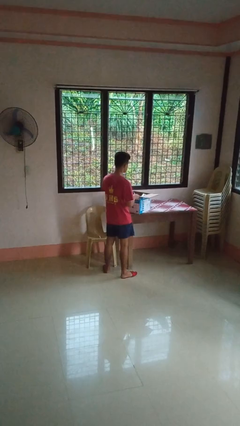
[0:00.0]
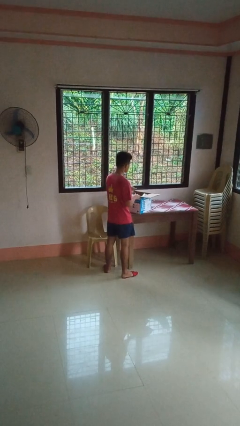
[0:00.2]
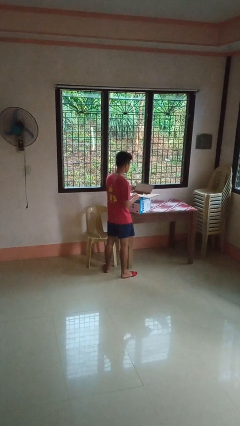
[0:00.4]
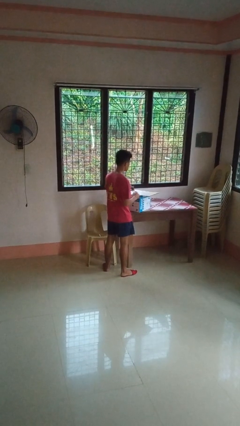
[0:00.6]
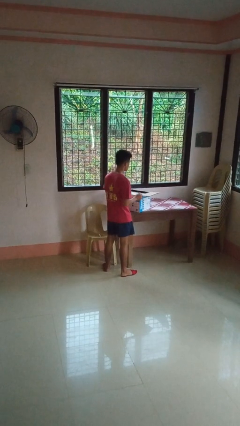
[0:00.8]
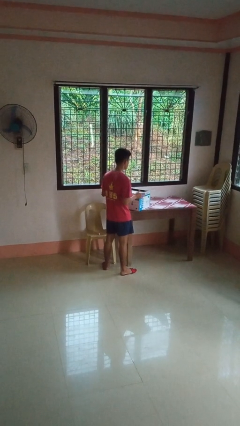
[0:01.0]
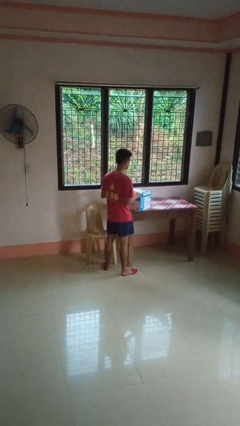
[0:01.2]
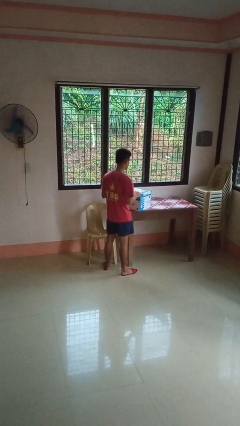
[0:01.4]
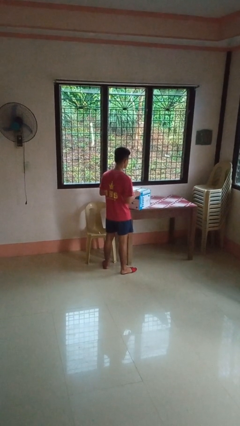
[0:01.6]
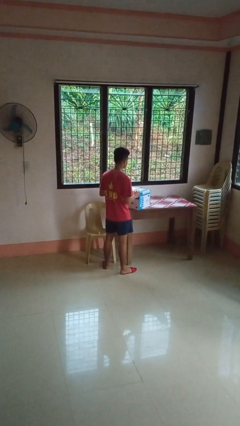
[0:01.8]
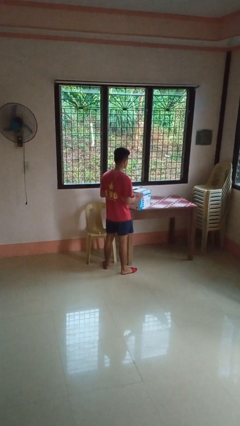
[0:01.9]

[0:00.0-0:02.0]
person closes box

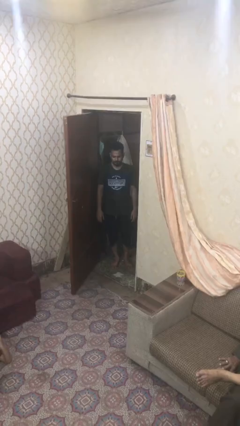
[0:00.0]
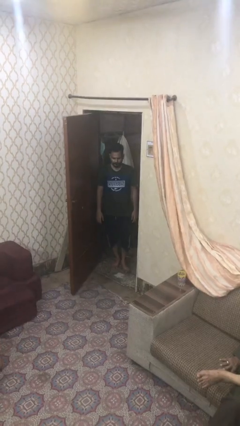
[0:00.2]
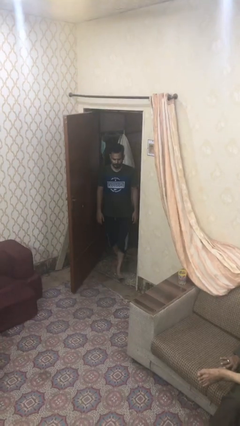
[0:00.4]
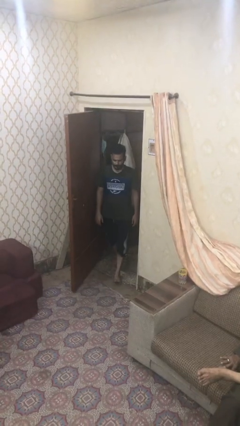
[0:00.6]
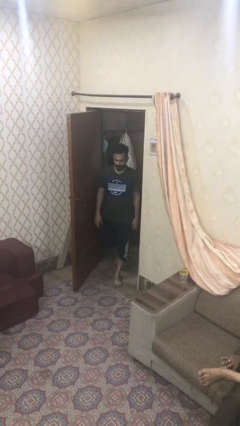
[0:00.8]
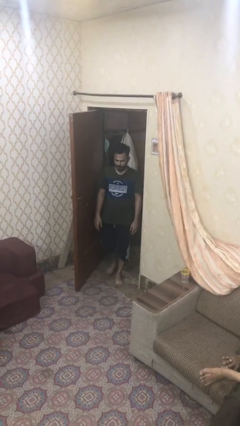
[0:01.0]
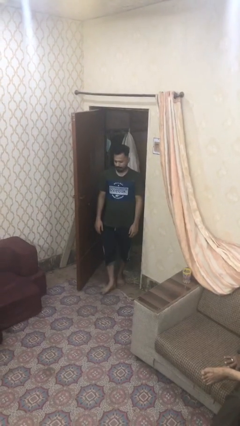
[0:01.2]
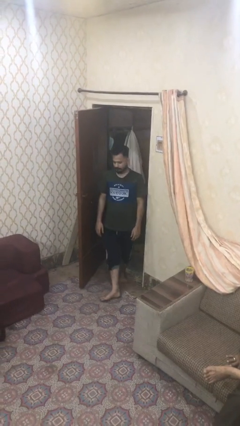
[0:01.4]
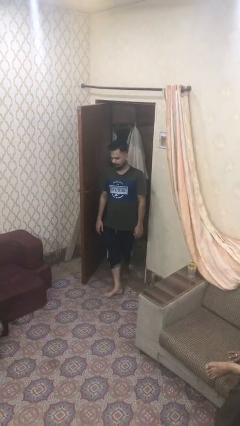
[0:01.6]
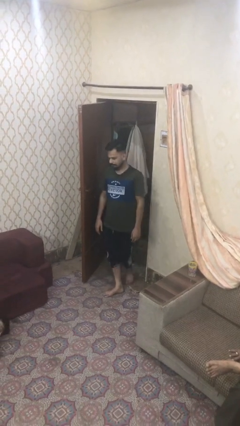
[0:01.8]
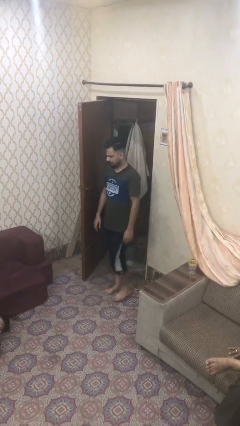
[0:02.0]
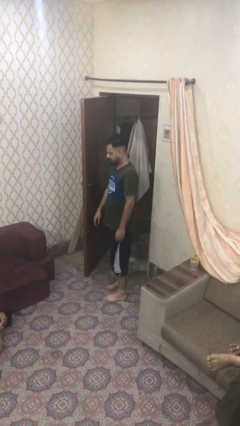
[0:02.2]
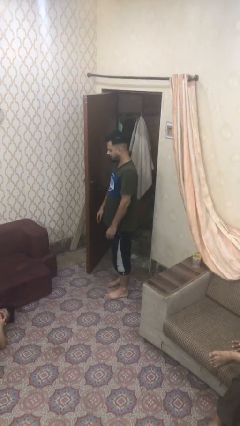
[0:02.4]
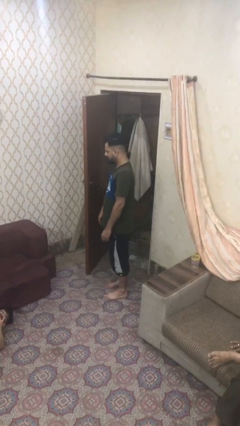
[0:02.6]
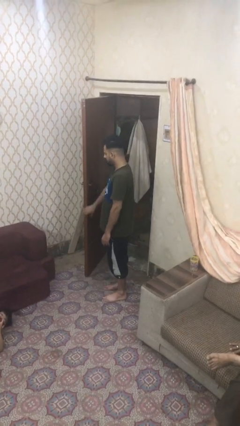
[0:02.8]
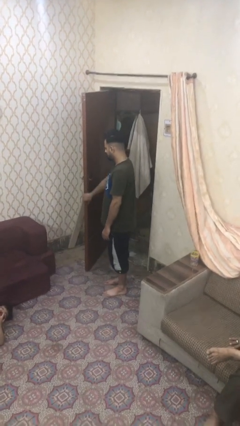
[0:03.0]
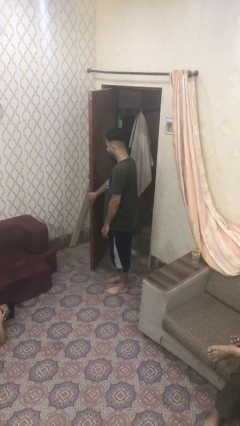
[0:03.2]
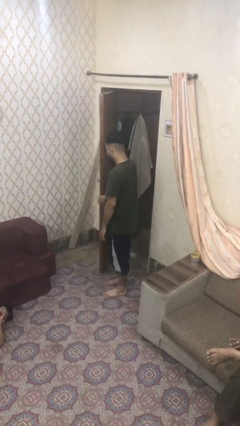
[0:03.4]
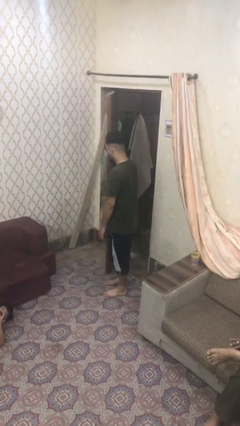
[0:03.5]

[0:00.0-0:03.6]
person enters scene through structure

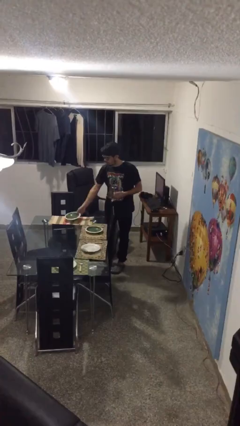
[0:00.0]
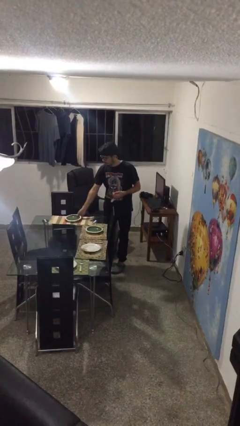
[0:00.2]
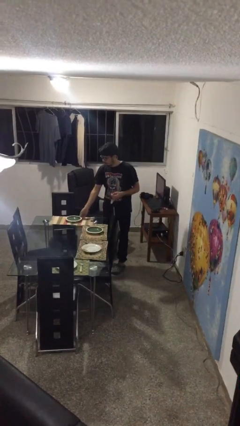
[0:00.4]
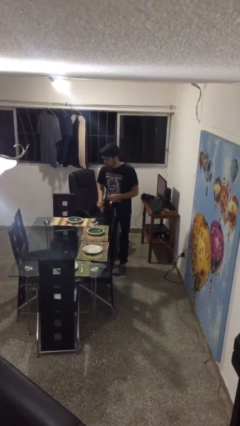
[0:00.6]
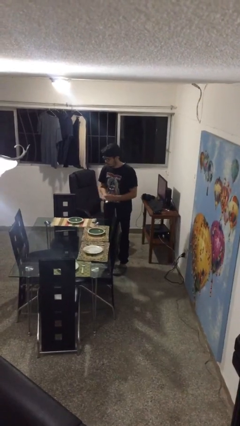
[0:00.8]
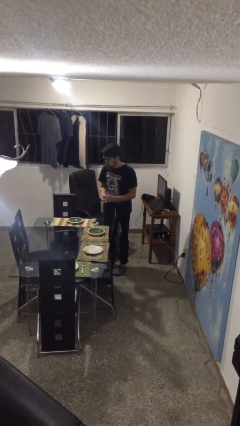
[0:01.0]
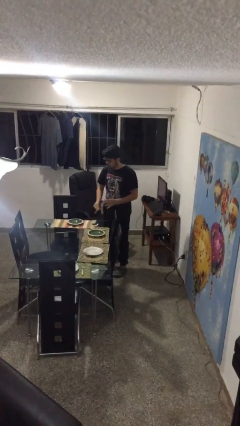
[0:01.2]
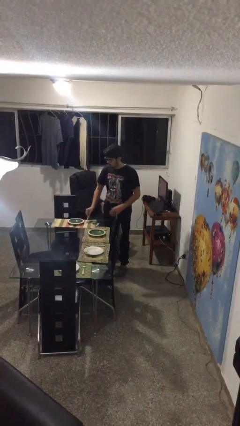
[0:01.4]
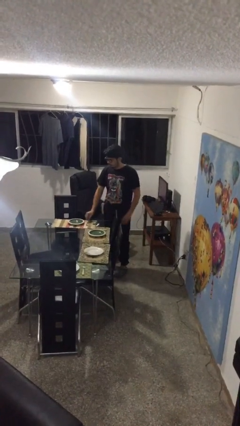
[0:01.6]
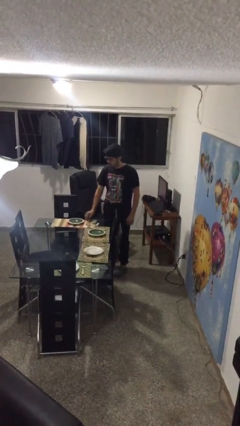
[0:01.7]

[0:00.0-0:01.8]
person sets table

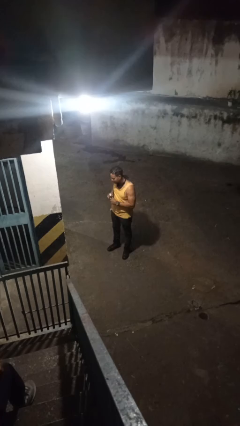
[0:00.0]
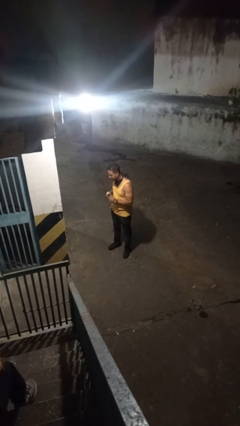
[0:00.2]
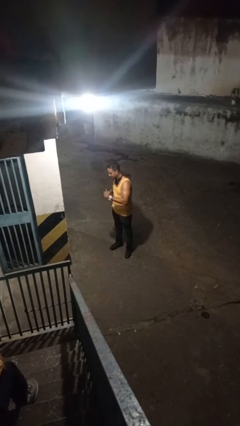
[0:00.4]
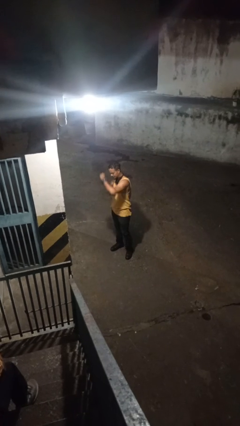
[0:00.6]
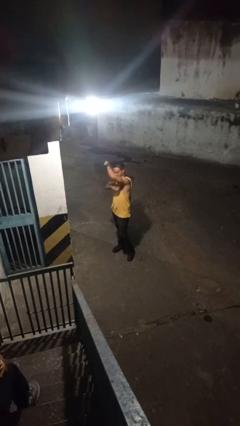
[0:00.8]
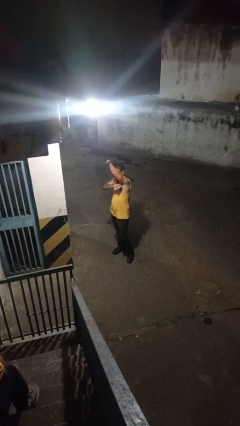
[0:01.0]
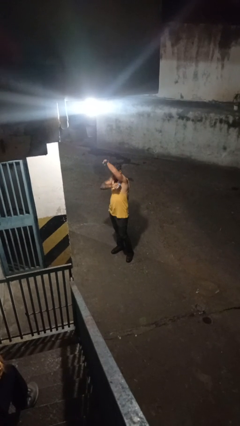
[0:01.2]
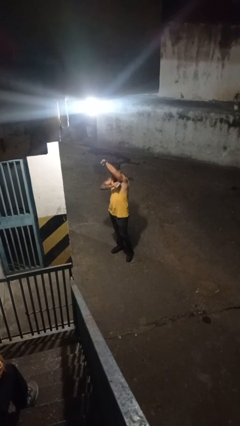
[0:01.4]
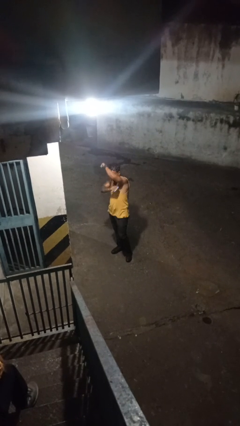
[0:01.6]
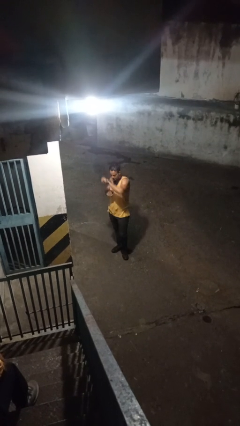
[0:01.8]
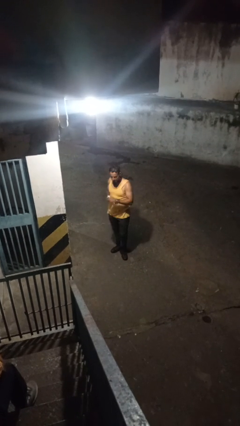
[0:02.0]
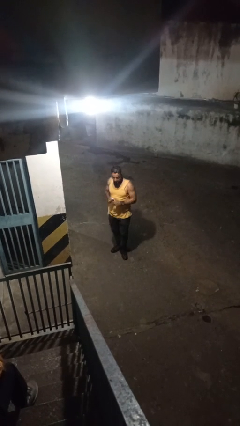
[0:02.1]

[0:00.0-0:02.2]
person applies deodorant

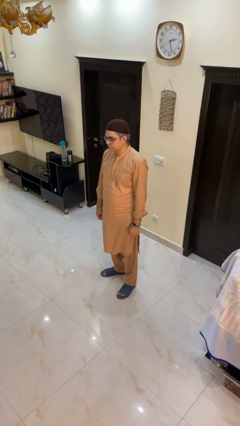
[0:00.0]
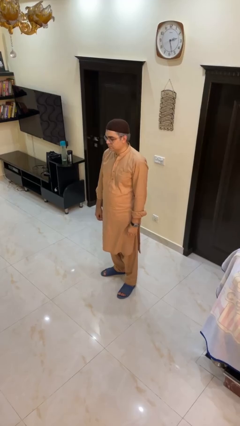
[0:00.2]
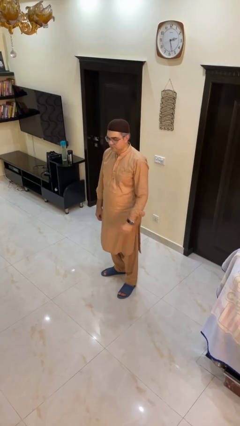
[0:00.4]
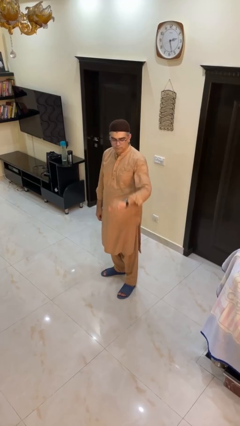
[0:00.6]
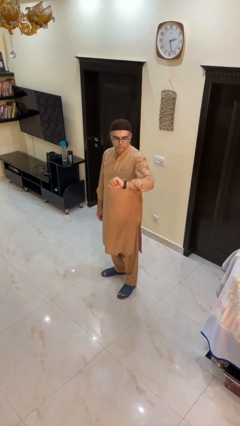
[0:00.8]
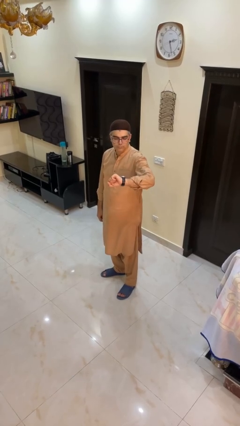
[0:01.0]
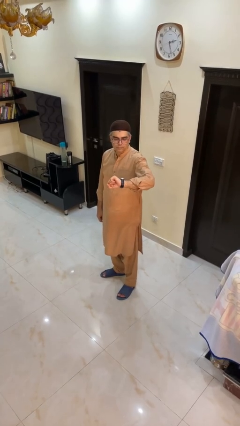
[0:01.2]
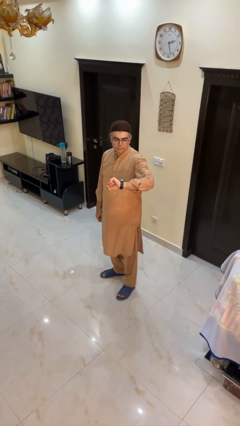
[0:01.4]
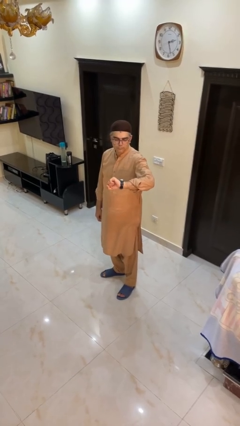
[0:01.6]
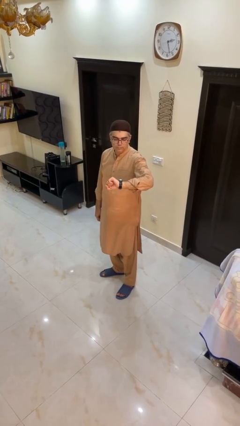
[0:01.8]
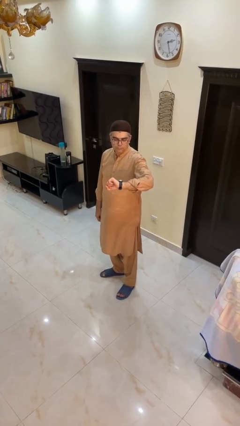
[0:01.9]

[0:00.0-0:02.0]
person looks at wristwatch

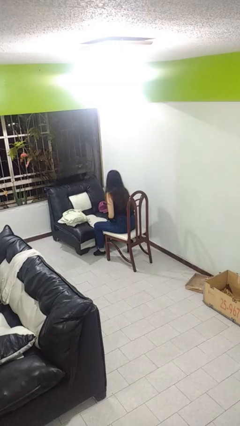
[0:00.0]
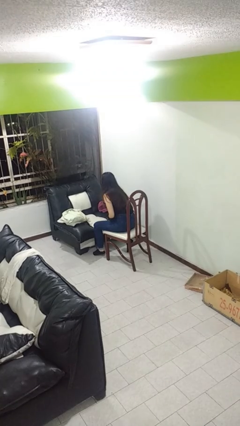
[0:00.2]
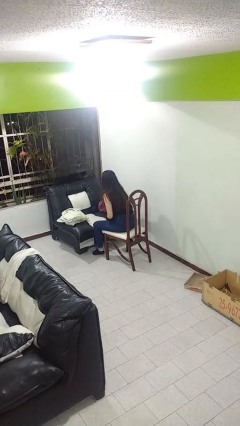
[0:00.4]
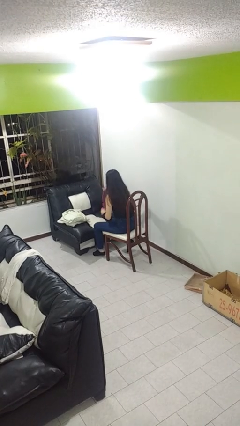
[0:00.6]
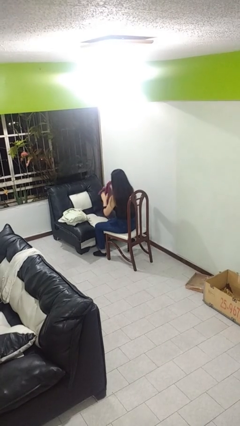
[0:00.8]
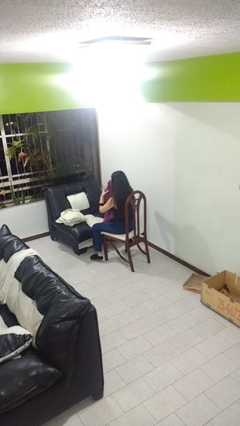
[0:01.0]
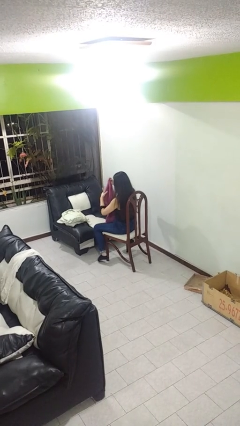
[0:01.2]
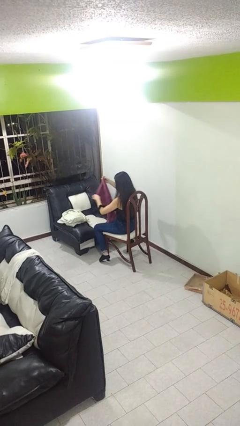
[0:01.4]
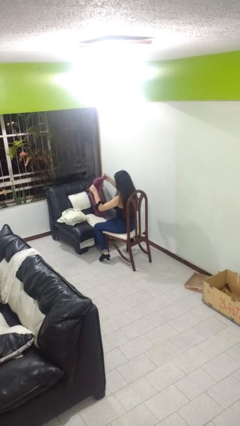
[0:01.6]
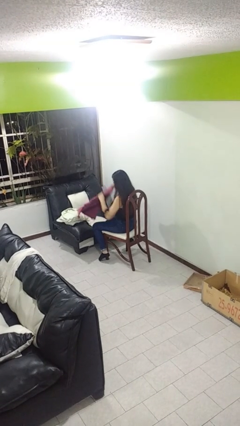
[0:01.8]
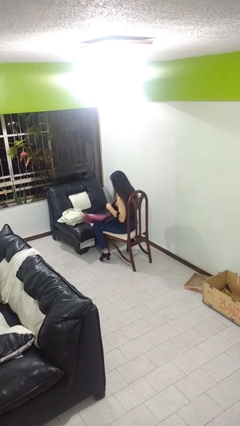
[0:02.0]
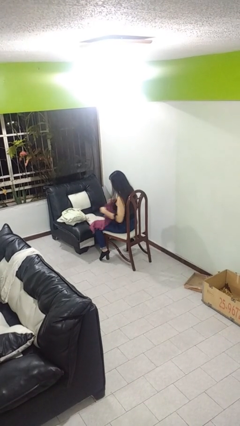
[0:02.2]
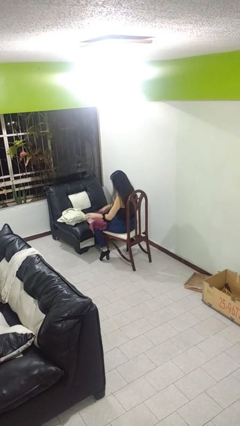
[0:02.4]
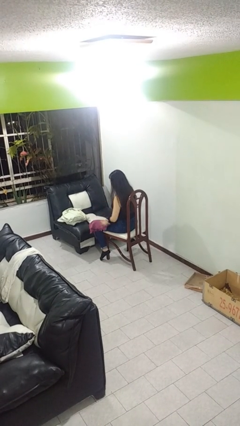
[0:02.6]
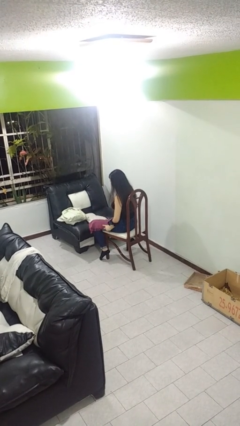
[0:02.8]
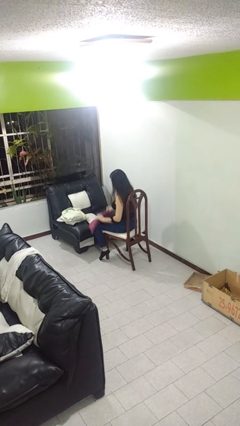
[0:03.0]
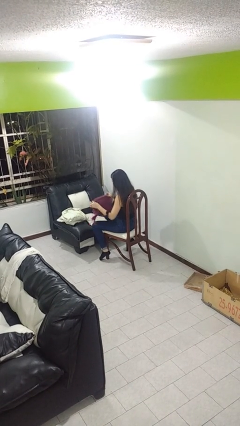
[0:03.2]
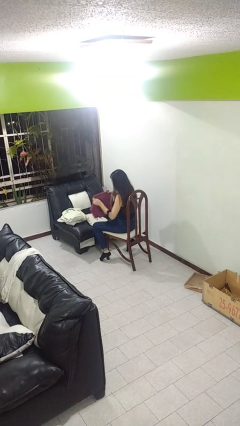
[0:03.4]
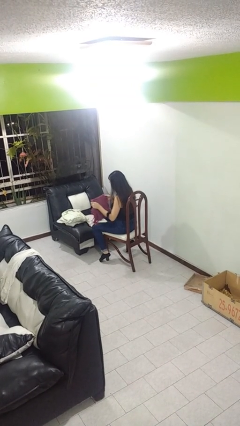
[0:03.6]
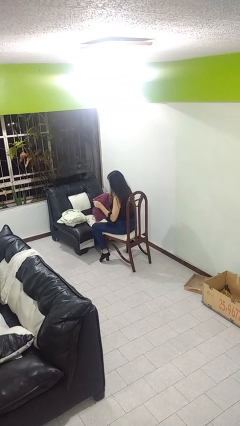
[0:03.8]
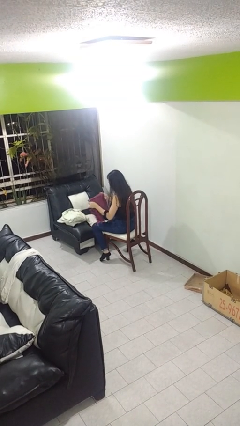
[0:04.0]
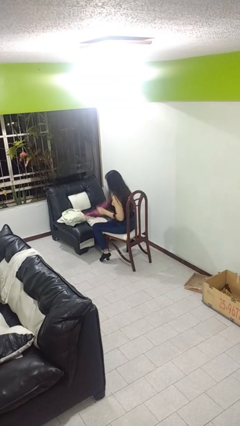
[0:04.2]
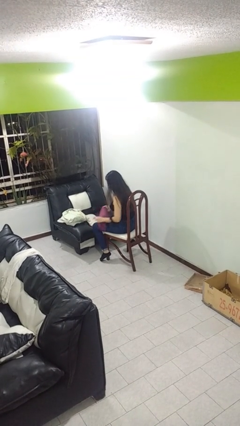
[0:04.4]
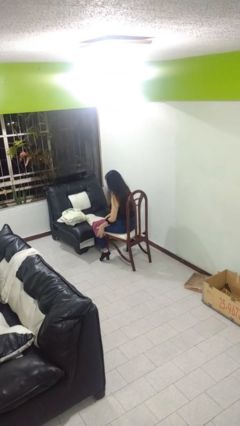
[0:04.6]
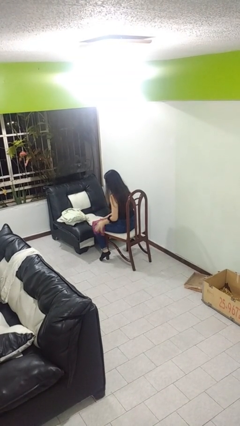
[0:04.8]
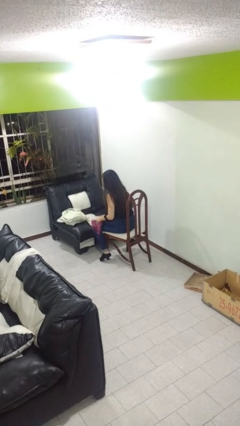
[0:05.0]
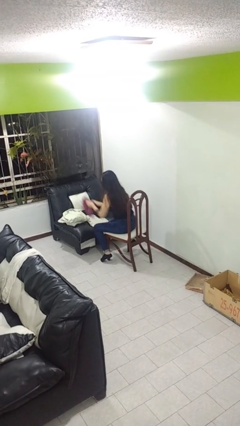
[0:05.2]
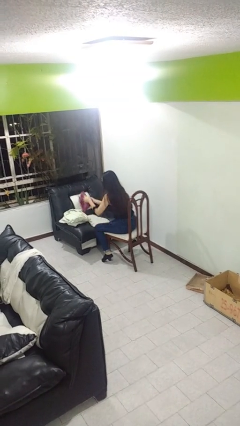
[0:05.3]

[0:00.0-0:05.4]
person folds towel

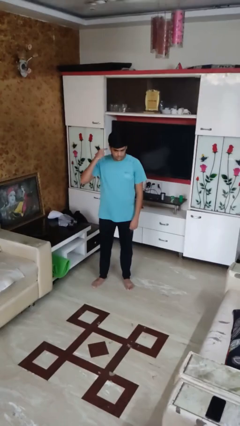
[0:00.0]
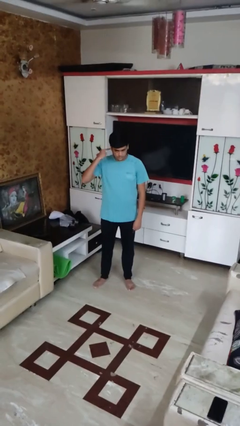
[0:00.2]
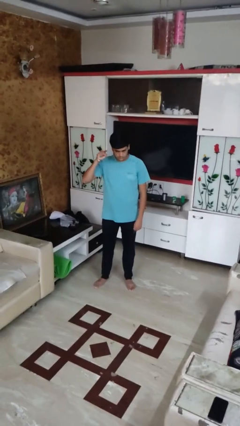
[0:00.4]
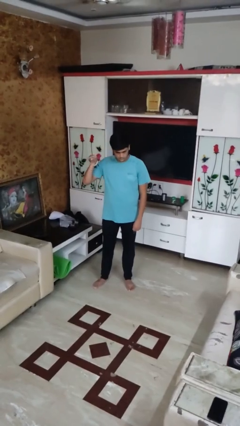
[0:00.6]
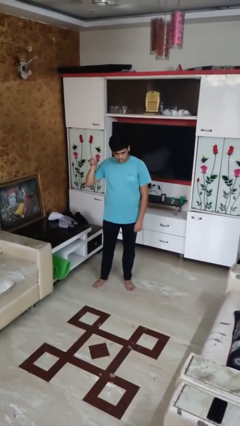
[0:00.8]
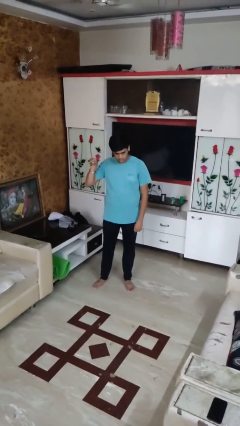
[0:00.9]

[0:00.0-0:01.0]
person gestures listen closely
